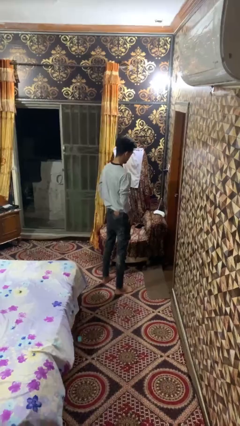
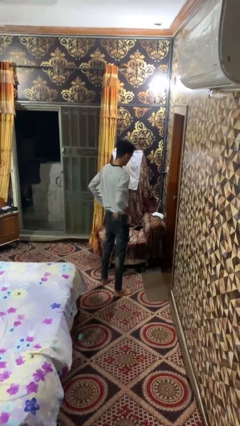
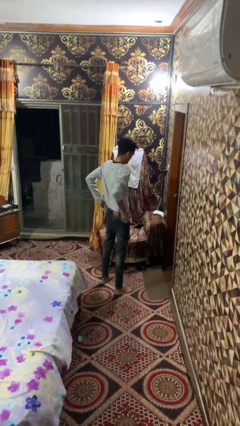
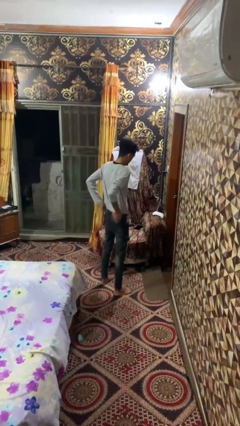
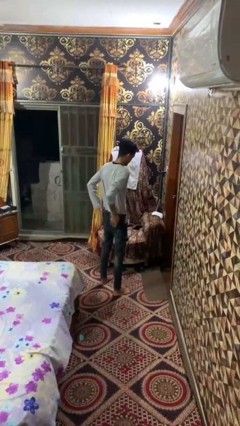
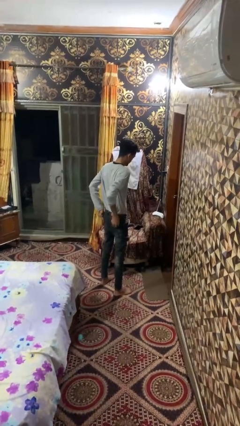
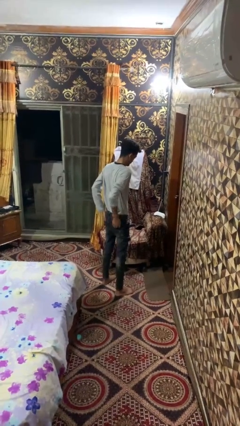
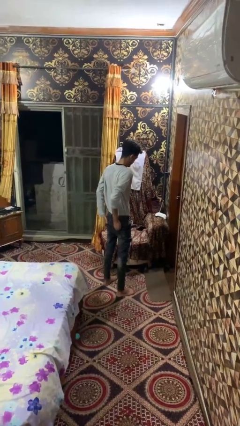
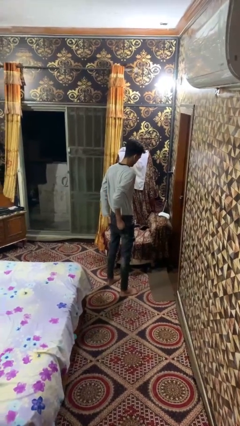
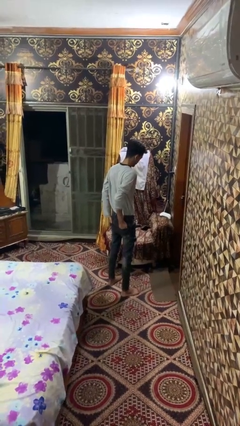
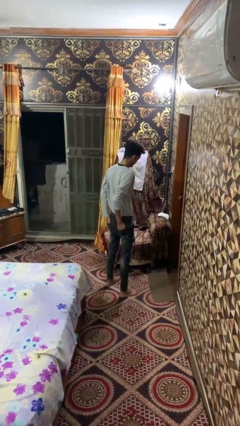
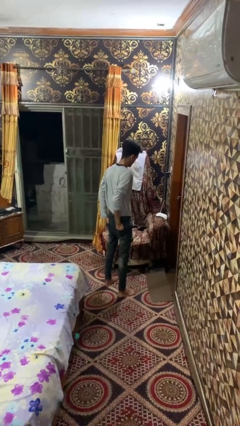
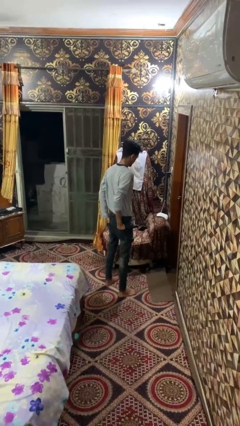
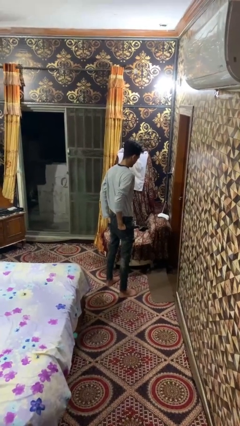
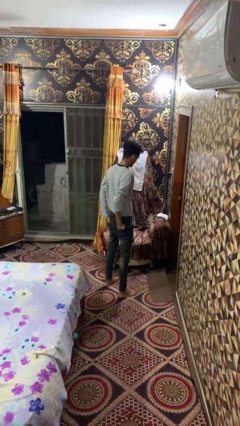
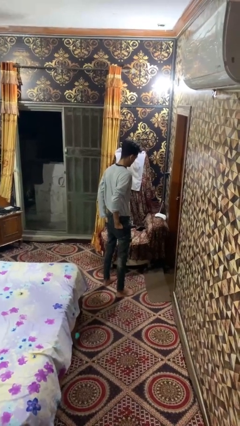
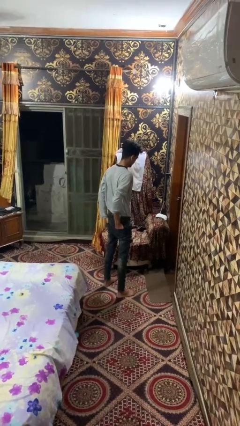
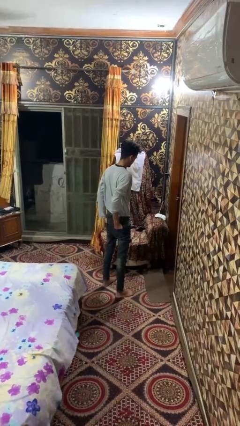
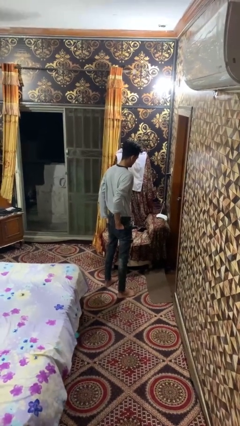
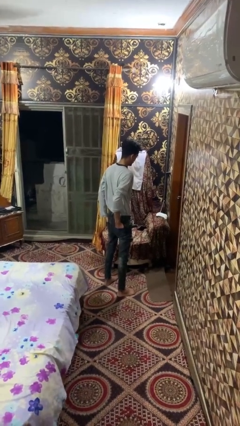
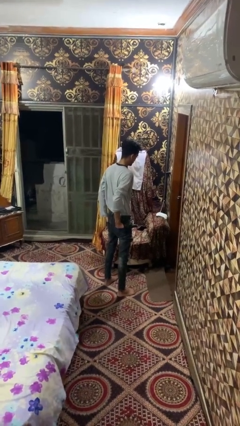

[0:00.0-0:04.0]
person puts hands in back pockets

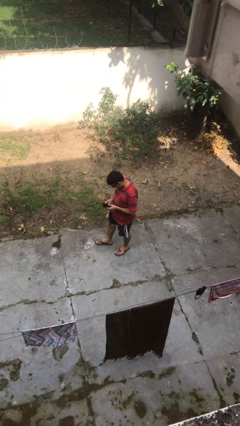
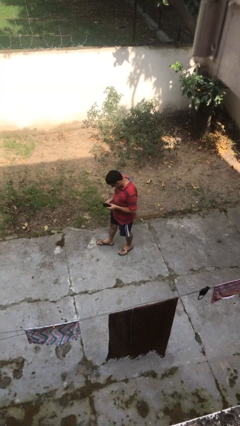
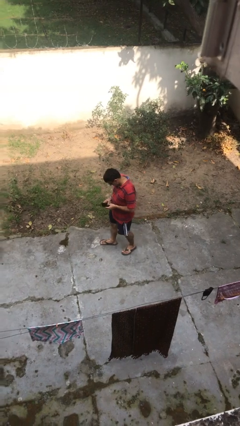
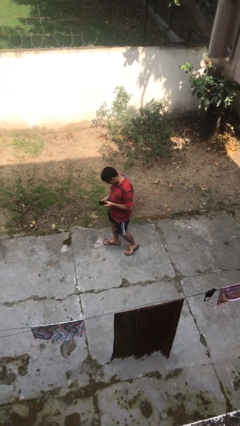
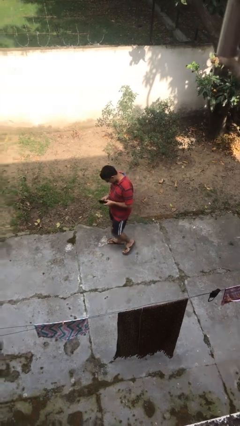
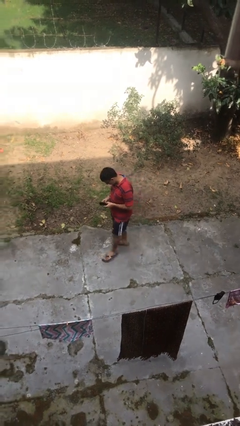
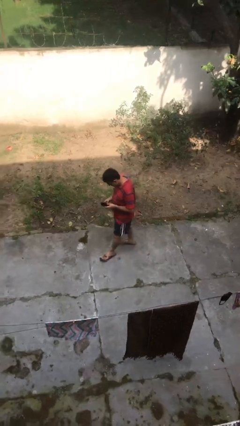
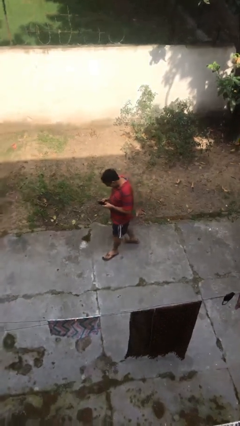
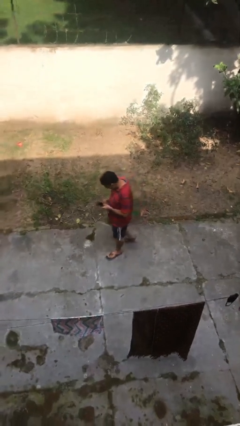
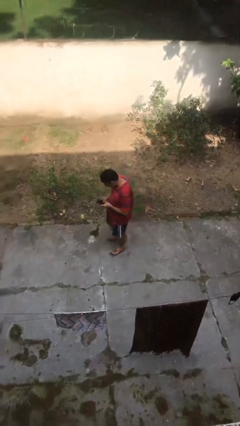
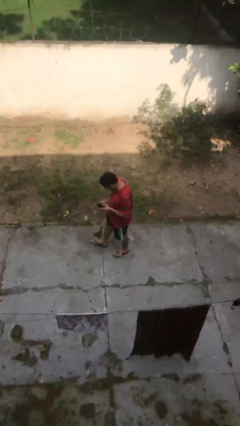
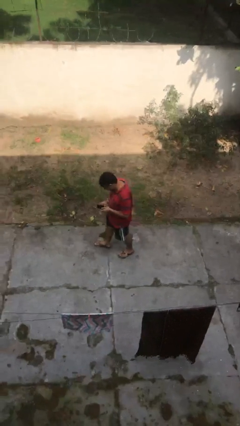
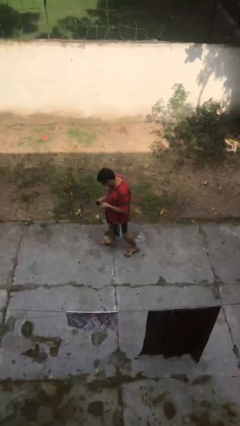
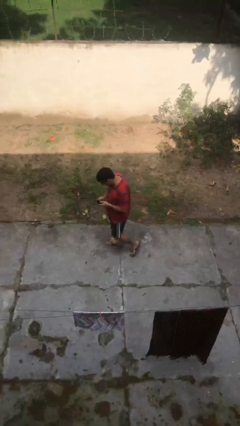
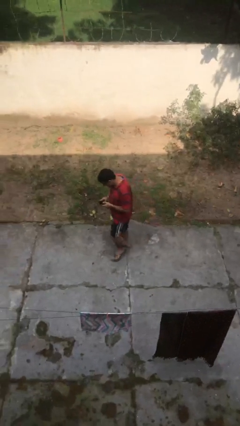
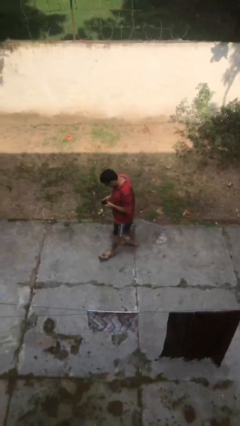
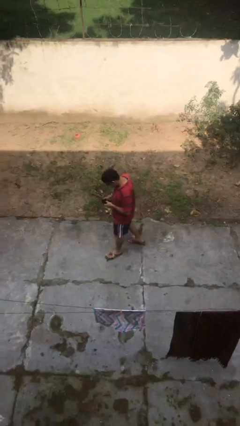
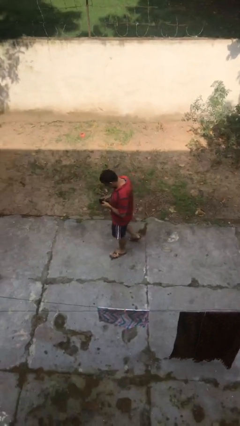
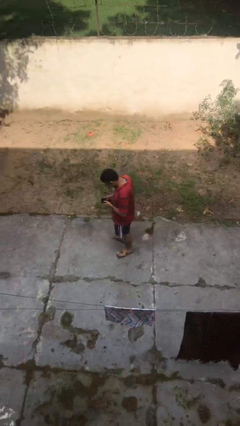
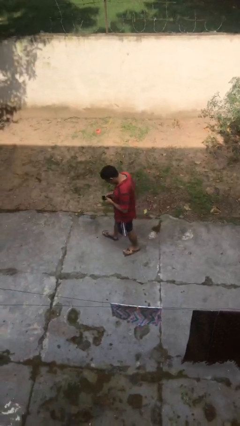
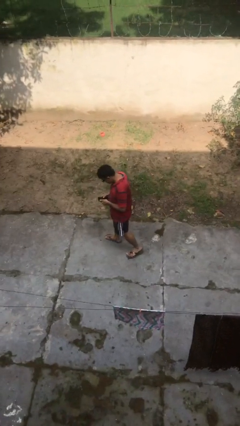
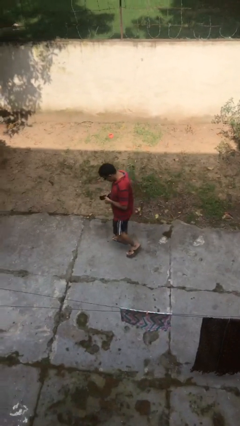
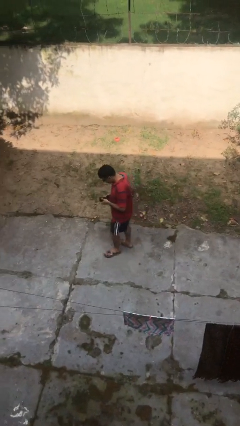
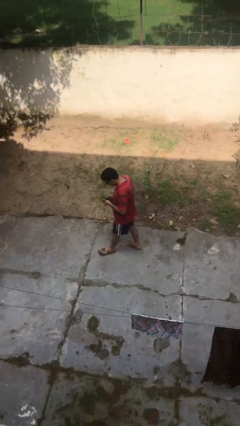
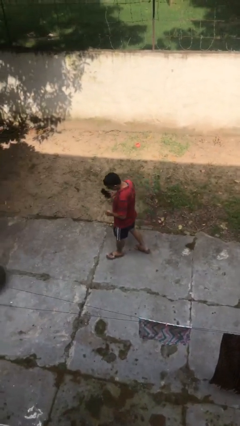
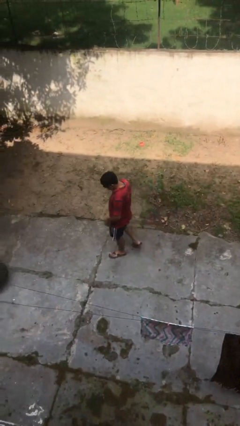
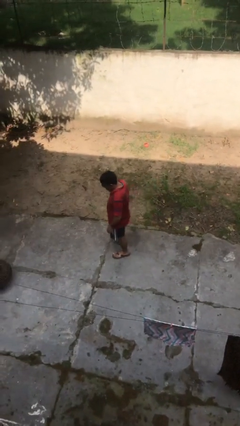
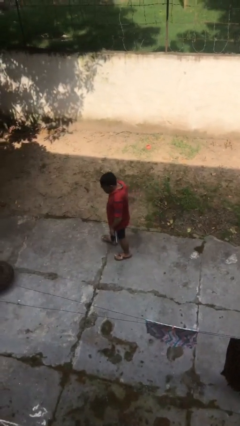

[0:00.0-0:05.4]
person texts on phone

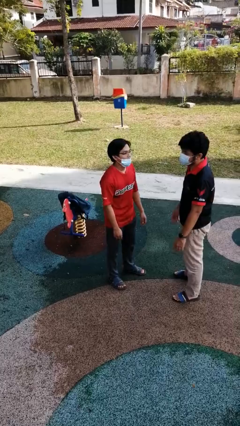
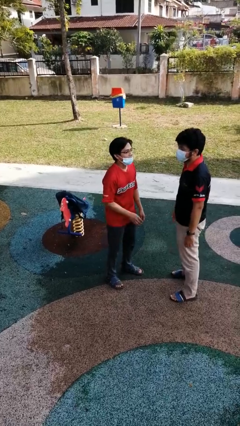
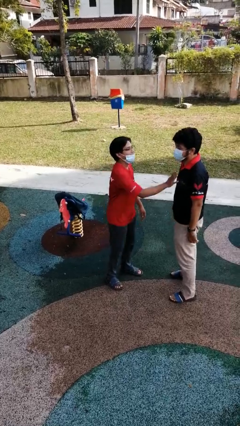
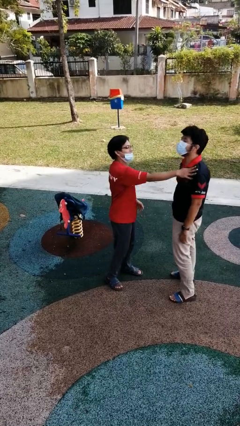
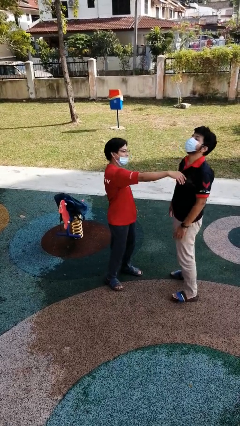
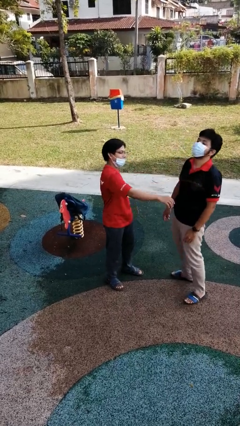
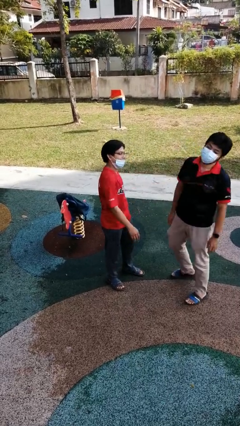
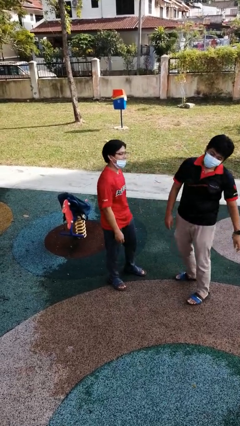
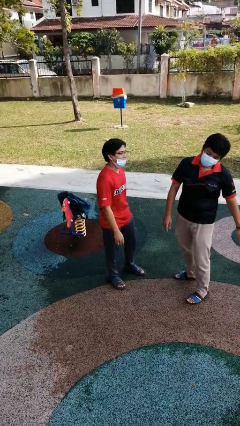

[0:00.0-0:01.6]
person shoves person

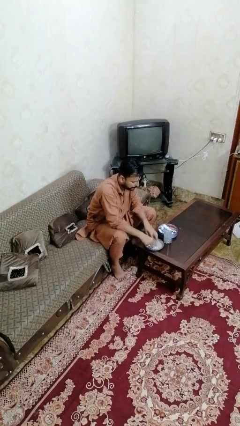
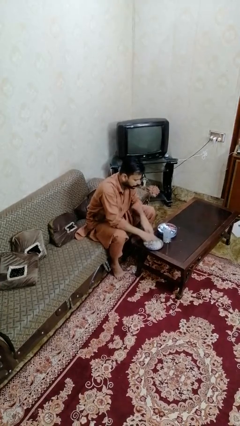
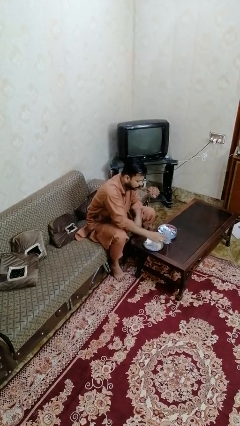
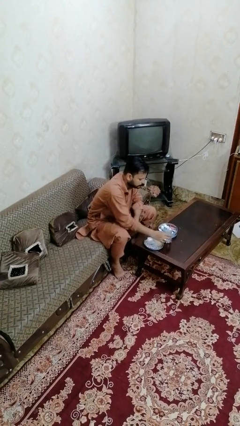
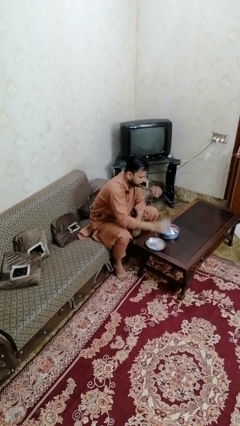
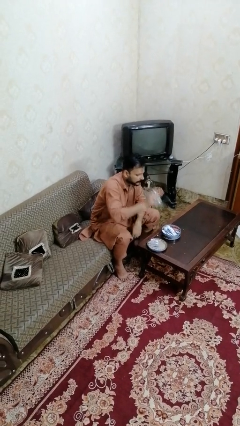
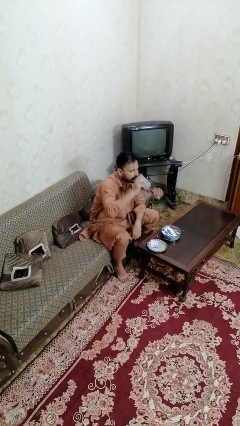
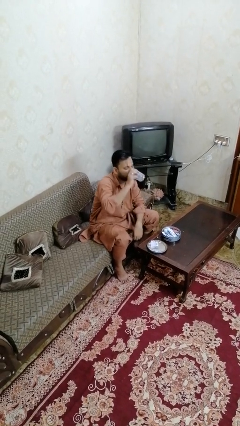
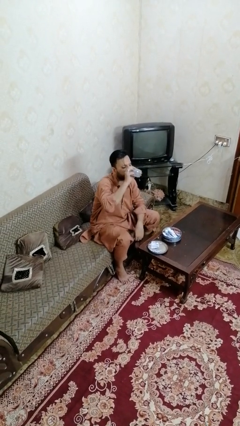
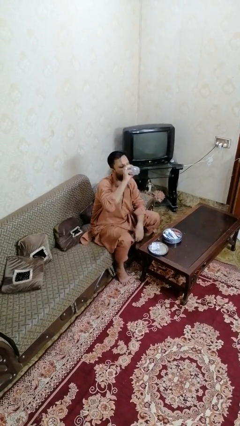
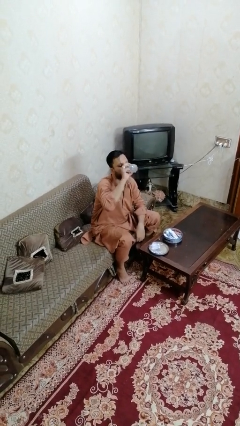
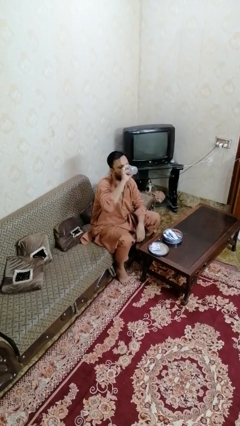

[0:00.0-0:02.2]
person drinks from cup

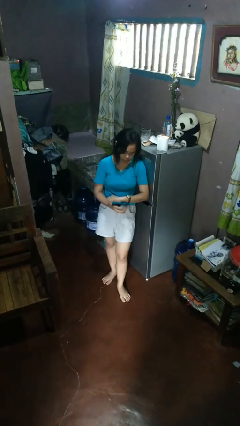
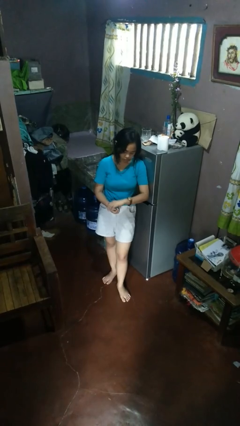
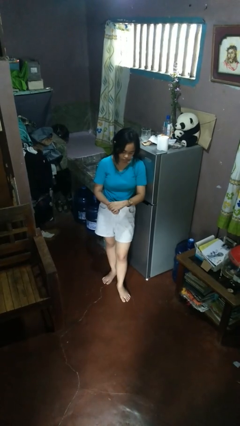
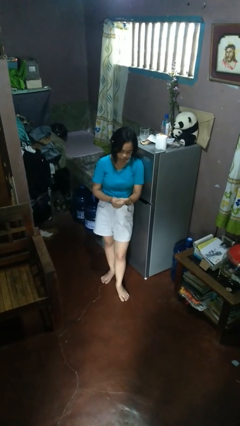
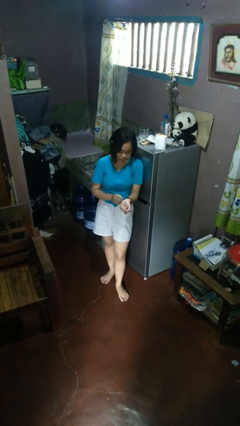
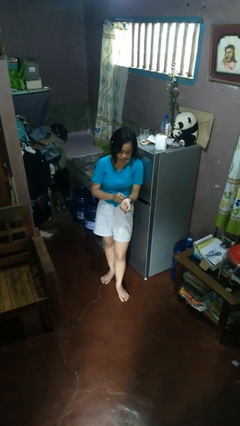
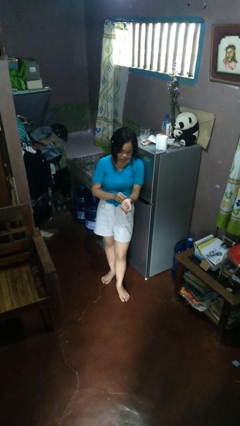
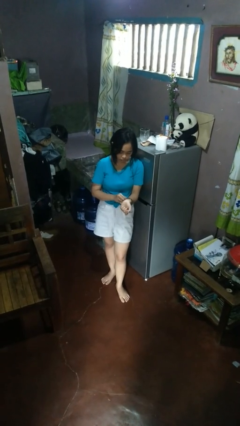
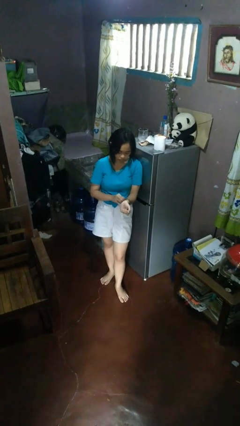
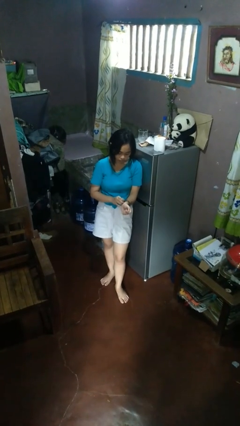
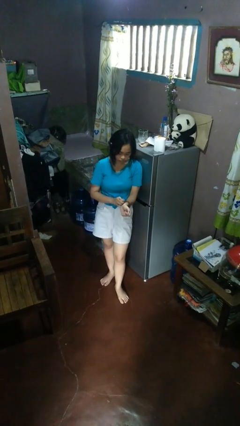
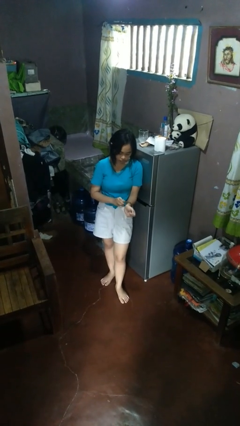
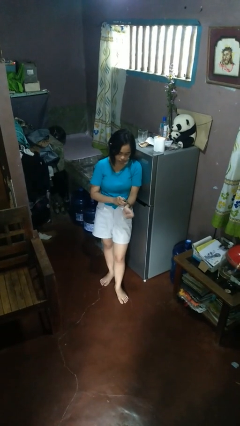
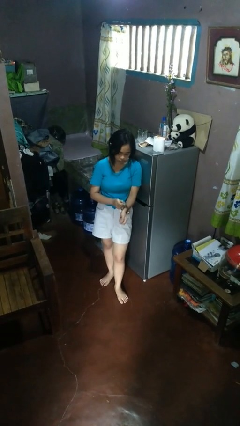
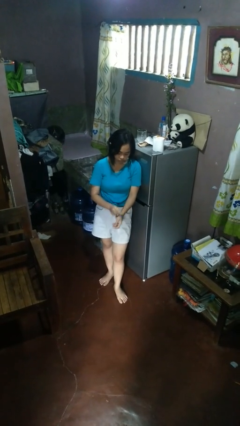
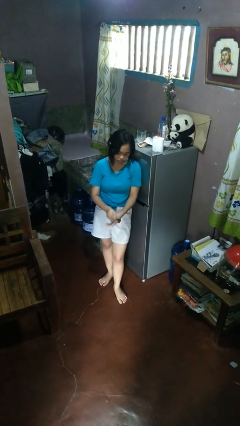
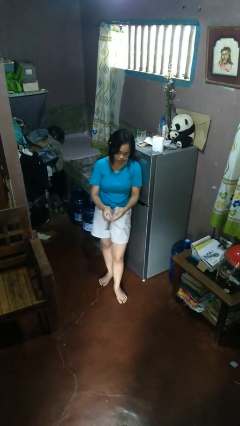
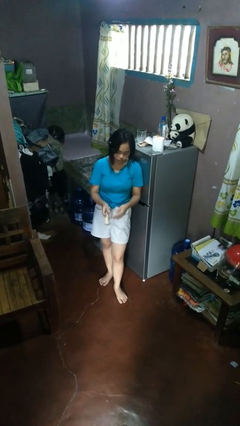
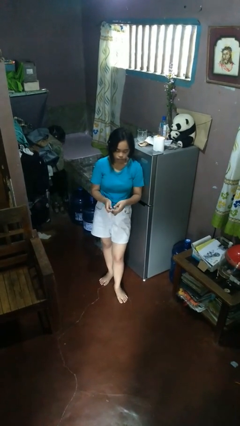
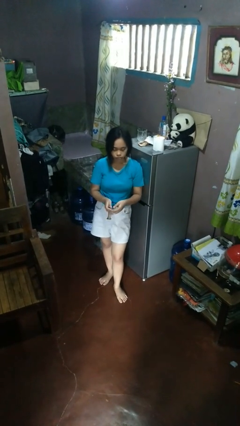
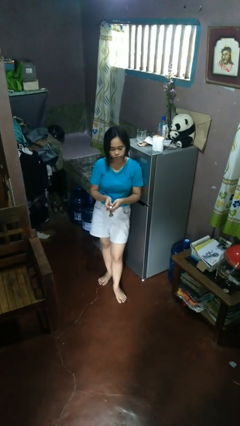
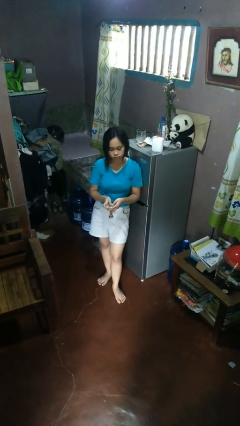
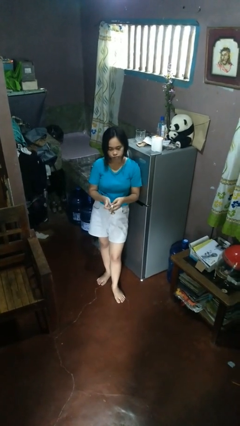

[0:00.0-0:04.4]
person takes off wristwatch

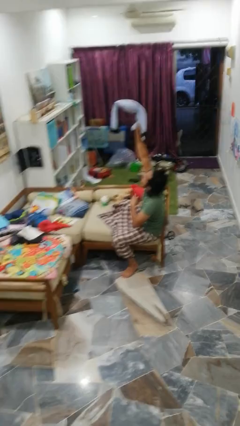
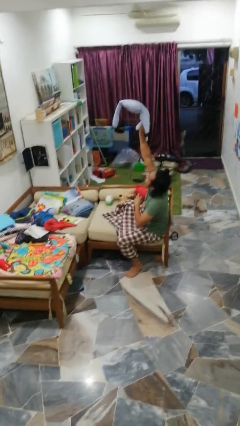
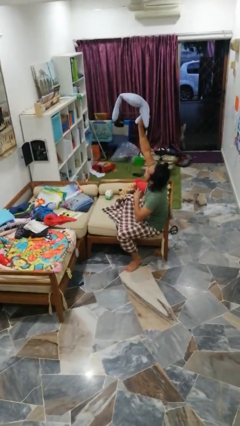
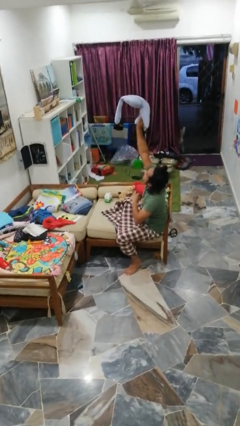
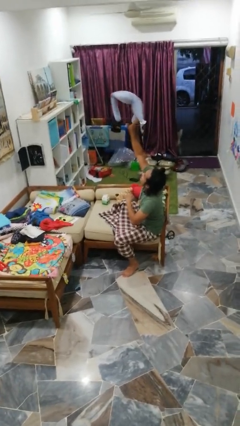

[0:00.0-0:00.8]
person drops object
